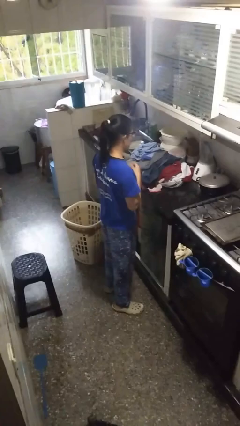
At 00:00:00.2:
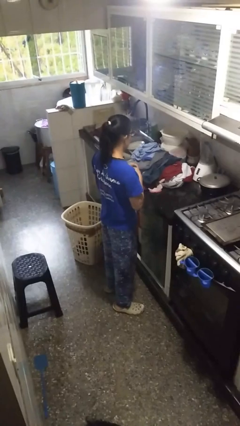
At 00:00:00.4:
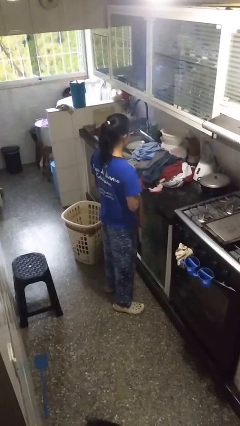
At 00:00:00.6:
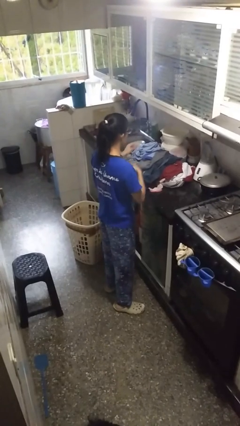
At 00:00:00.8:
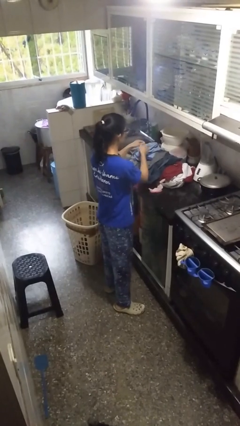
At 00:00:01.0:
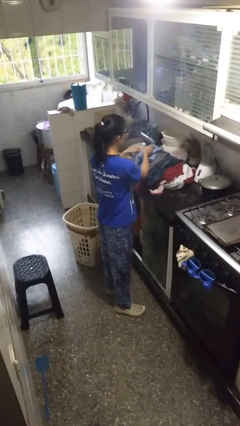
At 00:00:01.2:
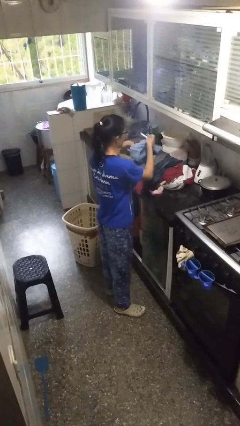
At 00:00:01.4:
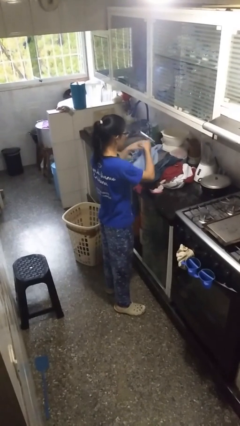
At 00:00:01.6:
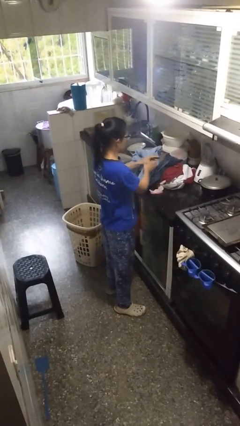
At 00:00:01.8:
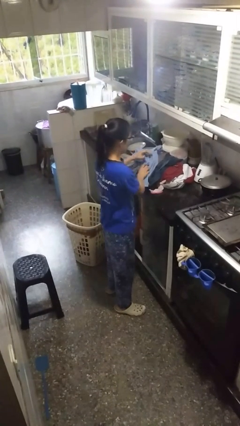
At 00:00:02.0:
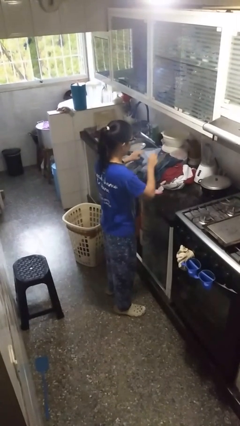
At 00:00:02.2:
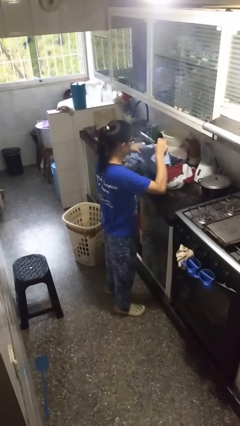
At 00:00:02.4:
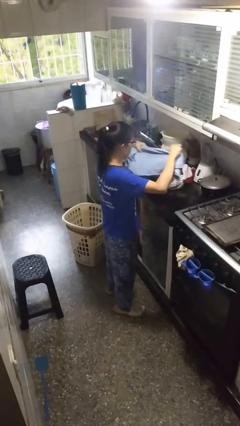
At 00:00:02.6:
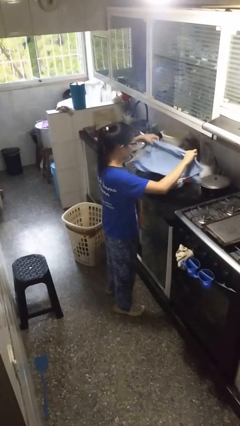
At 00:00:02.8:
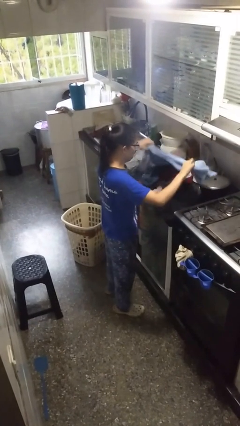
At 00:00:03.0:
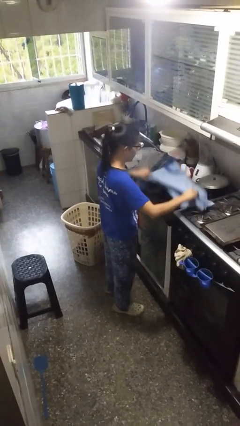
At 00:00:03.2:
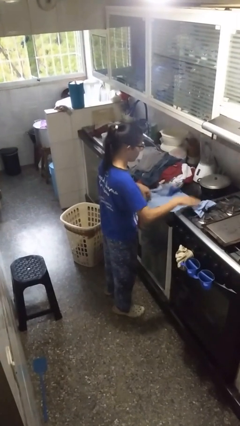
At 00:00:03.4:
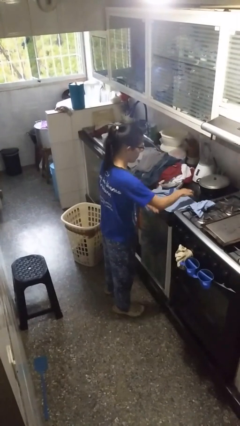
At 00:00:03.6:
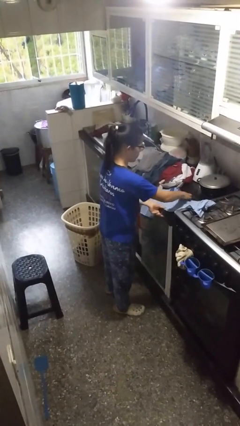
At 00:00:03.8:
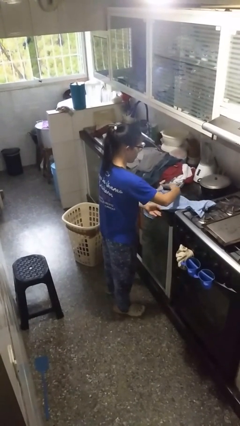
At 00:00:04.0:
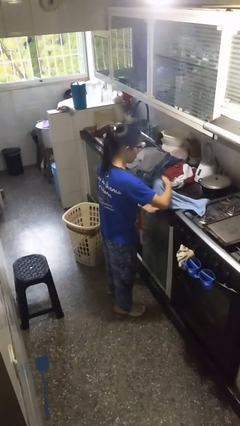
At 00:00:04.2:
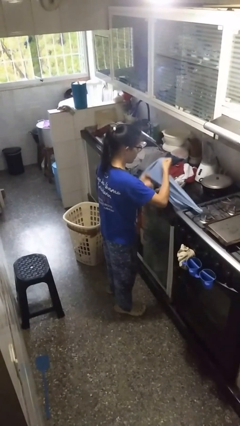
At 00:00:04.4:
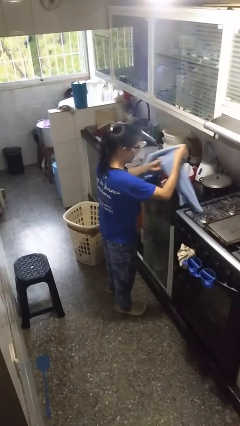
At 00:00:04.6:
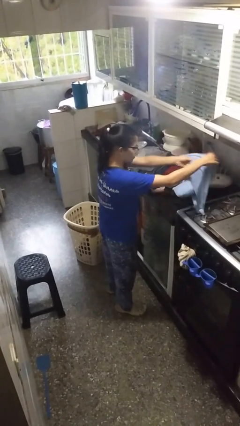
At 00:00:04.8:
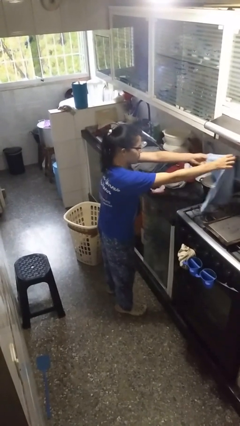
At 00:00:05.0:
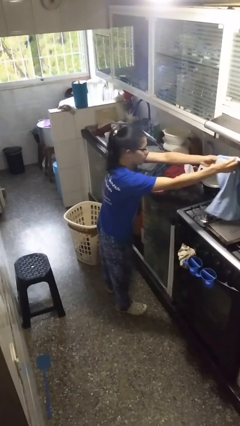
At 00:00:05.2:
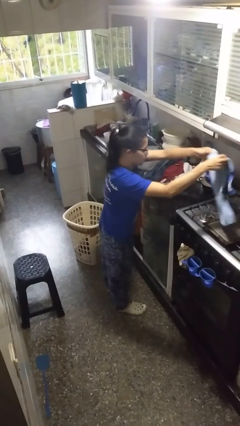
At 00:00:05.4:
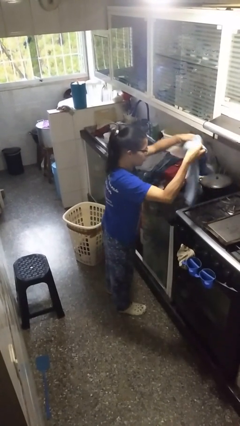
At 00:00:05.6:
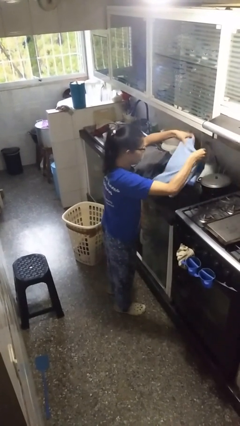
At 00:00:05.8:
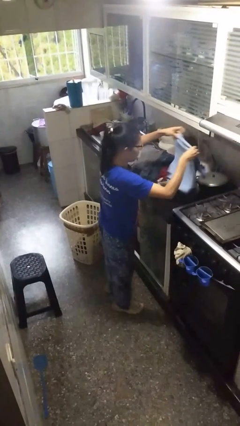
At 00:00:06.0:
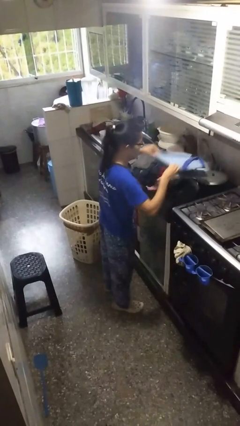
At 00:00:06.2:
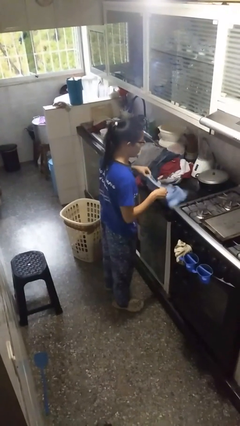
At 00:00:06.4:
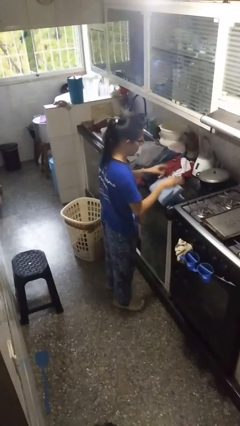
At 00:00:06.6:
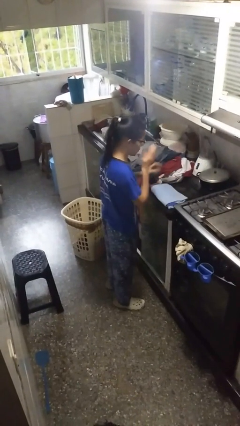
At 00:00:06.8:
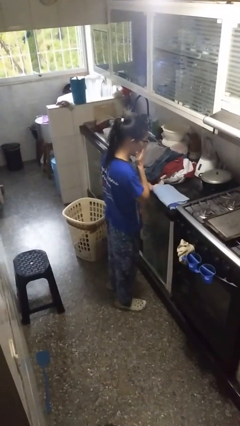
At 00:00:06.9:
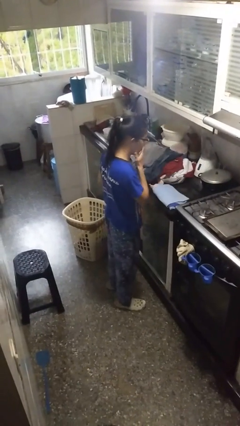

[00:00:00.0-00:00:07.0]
person folds shirt

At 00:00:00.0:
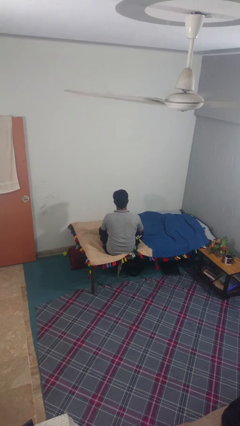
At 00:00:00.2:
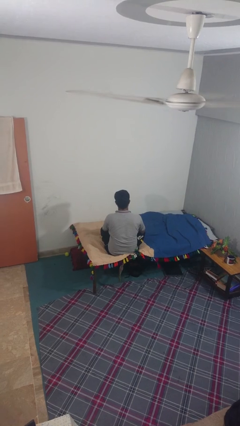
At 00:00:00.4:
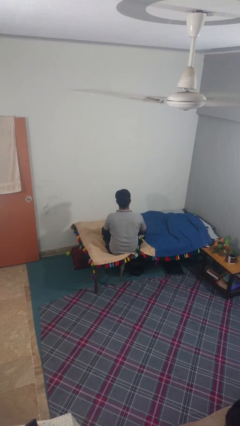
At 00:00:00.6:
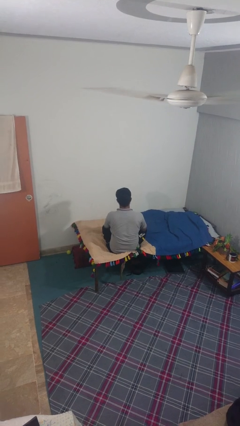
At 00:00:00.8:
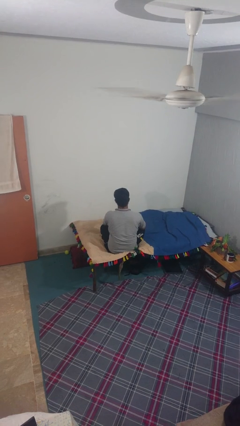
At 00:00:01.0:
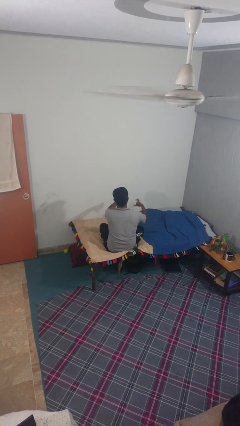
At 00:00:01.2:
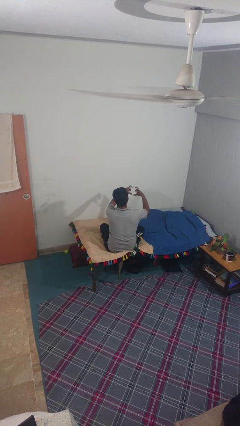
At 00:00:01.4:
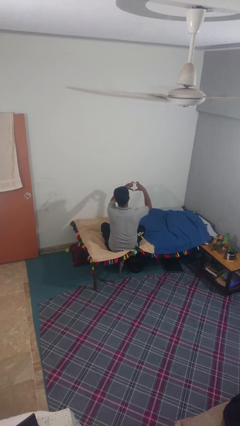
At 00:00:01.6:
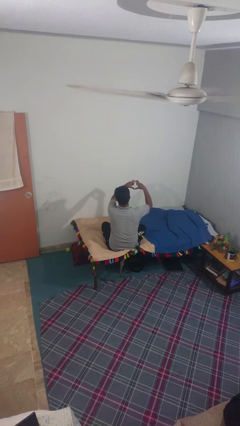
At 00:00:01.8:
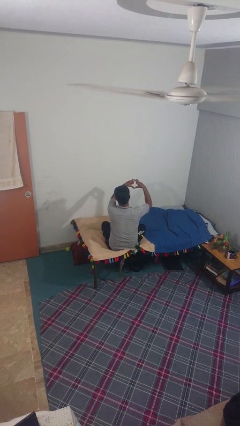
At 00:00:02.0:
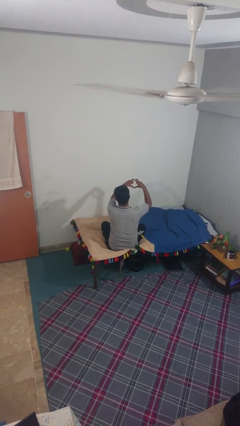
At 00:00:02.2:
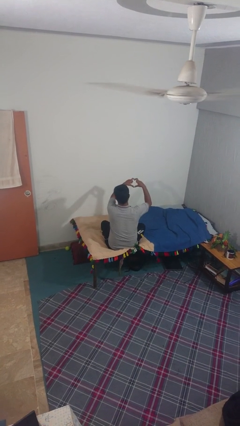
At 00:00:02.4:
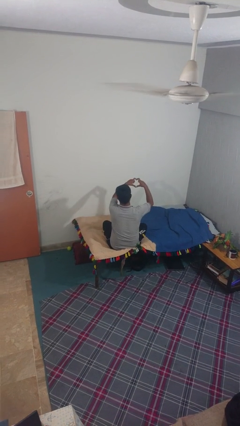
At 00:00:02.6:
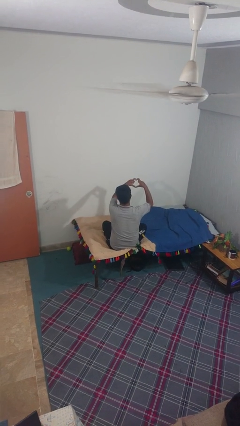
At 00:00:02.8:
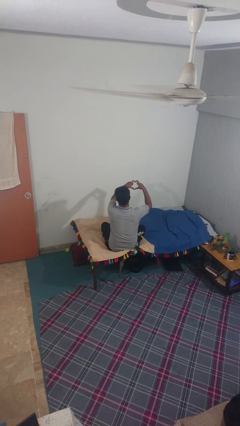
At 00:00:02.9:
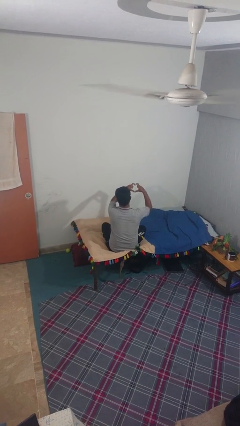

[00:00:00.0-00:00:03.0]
person gestures heart

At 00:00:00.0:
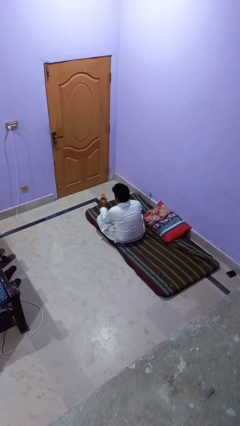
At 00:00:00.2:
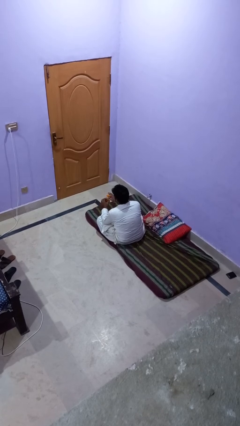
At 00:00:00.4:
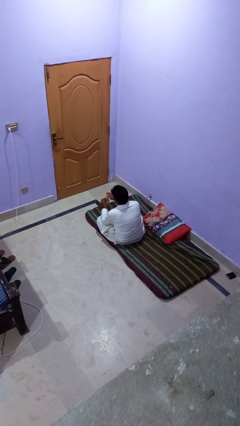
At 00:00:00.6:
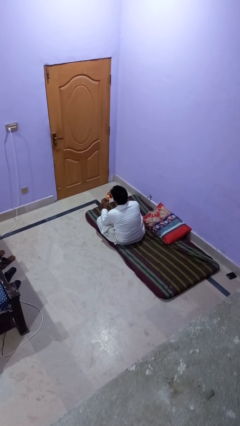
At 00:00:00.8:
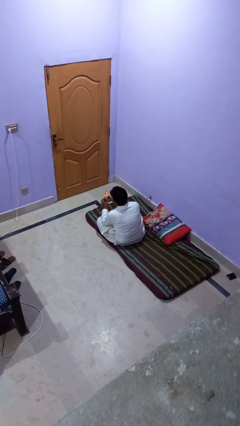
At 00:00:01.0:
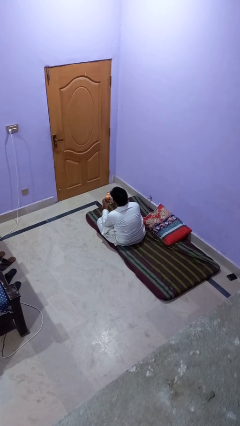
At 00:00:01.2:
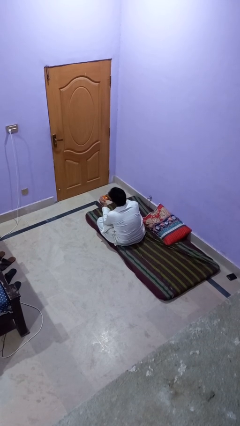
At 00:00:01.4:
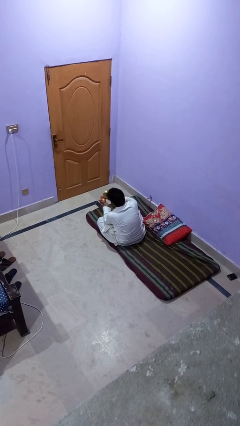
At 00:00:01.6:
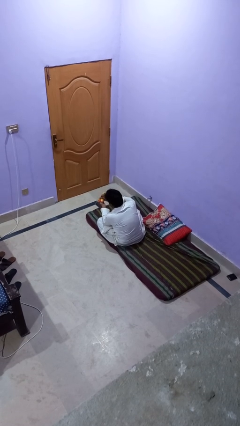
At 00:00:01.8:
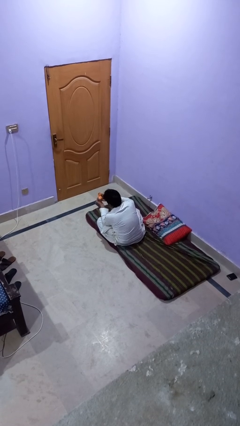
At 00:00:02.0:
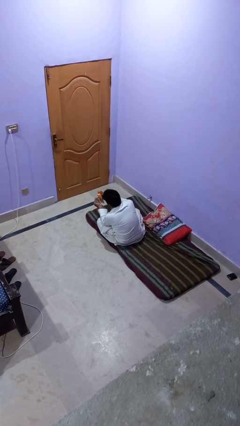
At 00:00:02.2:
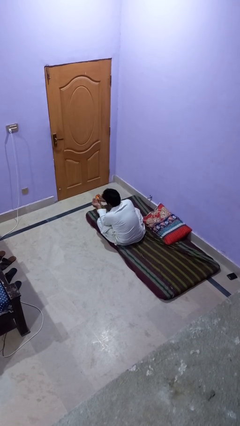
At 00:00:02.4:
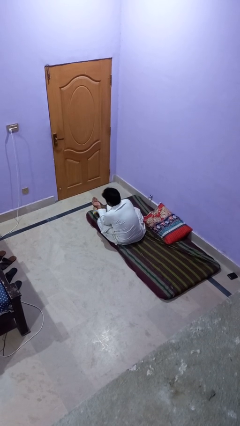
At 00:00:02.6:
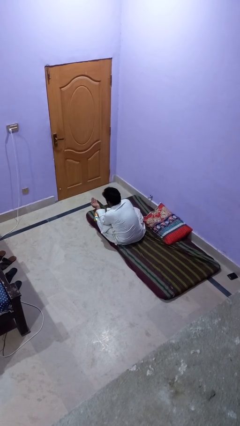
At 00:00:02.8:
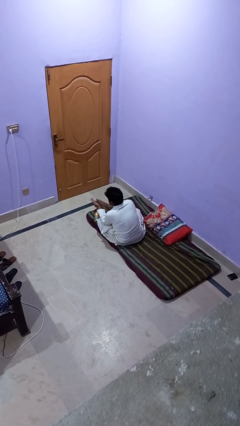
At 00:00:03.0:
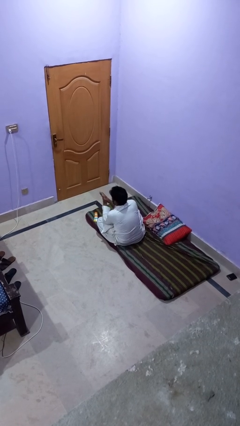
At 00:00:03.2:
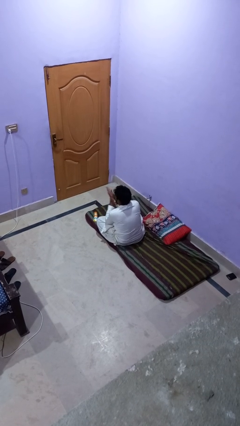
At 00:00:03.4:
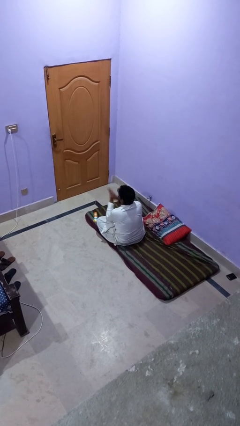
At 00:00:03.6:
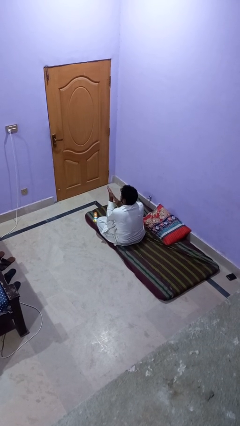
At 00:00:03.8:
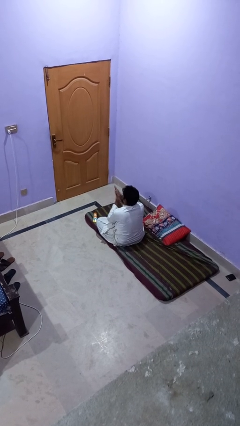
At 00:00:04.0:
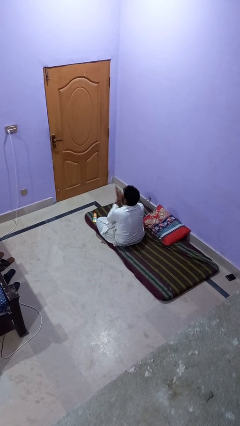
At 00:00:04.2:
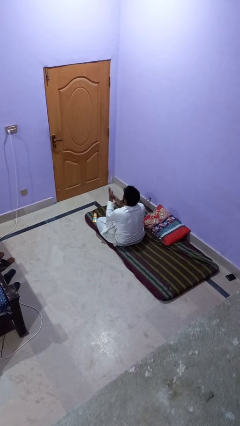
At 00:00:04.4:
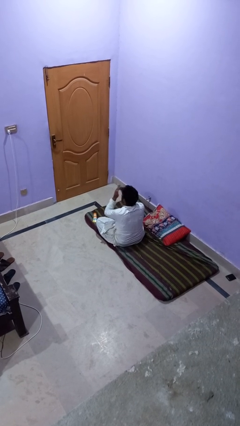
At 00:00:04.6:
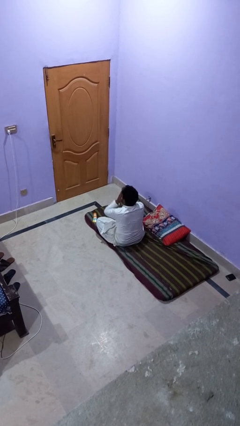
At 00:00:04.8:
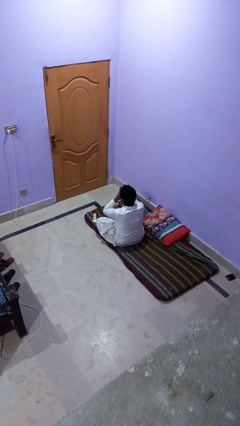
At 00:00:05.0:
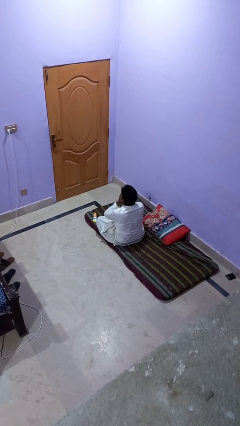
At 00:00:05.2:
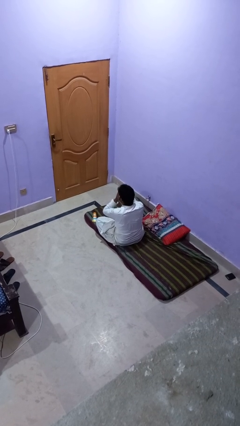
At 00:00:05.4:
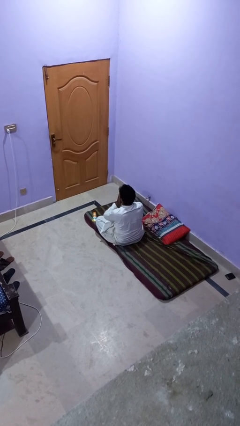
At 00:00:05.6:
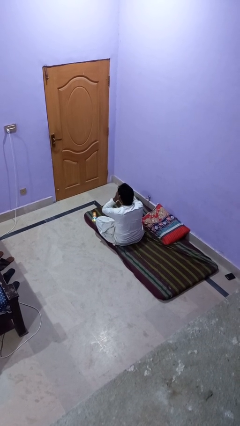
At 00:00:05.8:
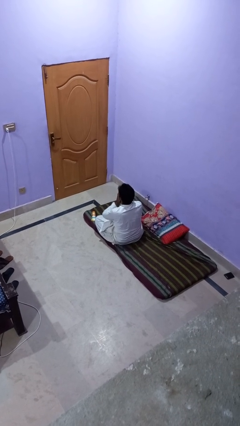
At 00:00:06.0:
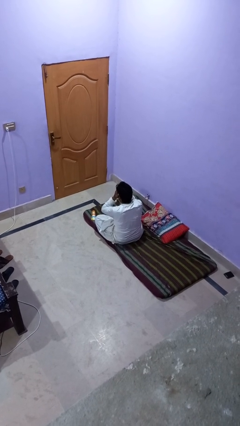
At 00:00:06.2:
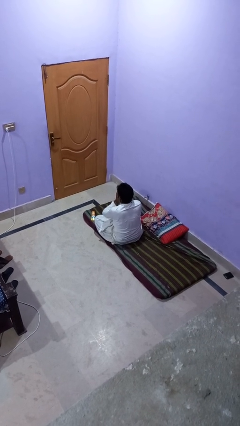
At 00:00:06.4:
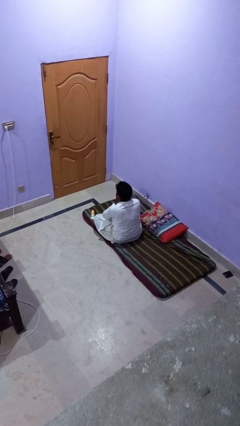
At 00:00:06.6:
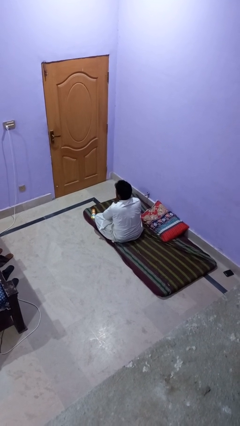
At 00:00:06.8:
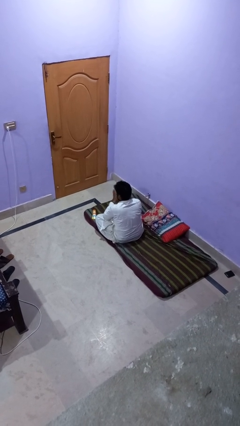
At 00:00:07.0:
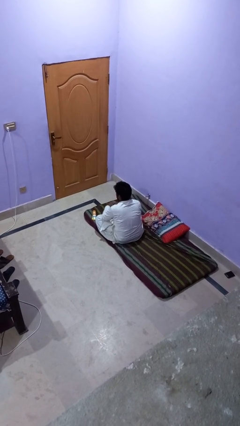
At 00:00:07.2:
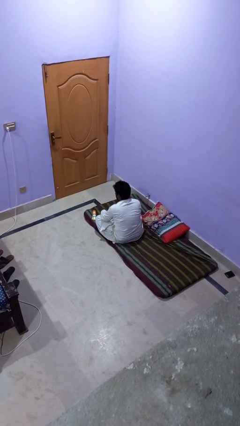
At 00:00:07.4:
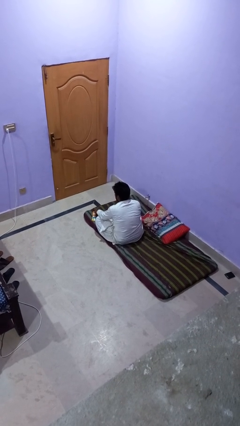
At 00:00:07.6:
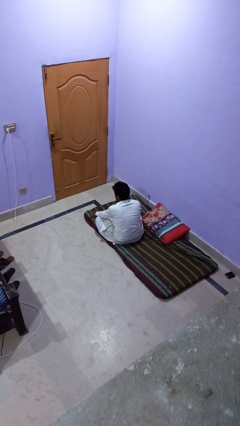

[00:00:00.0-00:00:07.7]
person applies sunscreen
